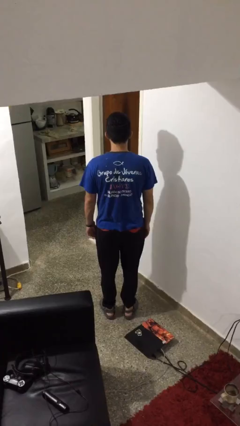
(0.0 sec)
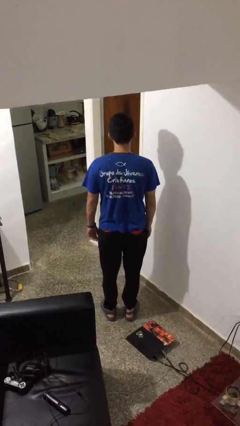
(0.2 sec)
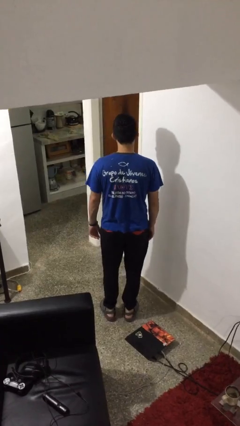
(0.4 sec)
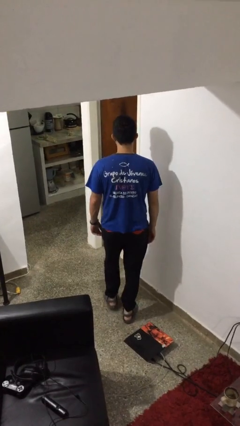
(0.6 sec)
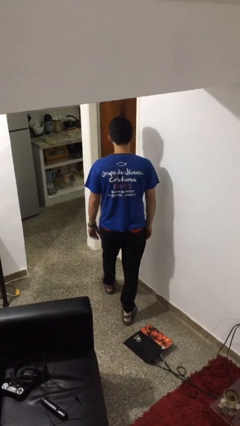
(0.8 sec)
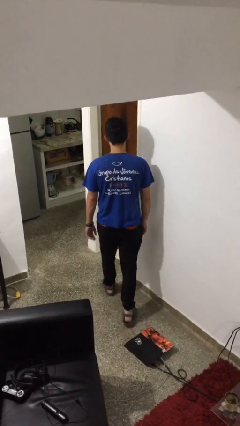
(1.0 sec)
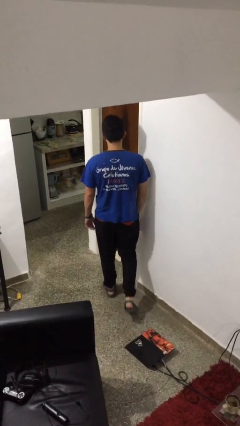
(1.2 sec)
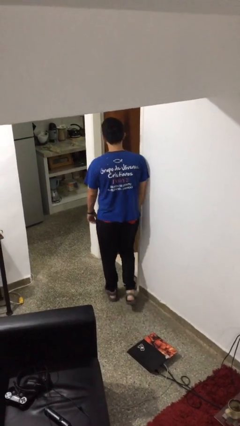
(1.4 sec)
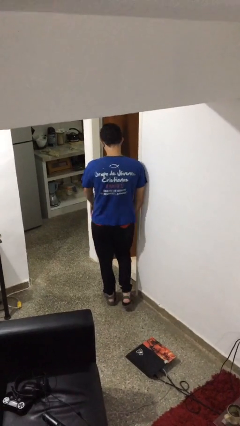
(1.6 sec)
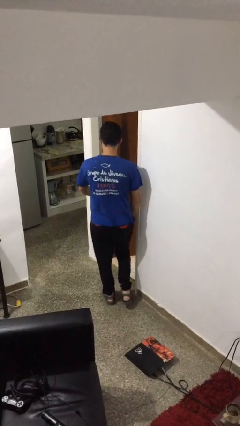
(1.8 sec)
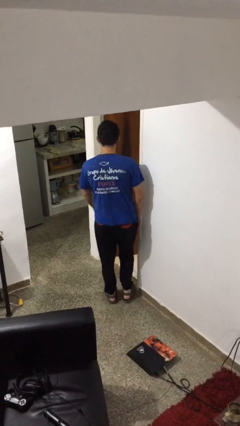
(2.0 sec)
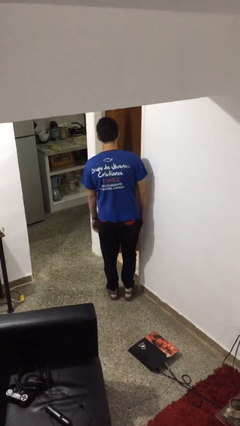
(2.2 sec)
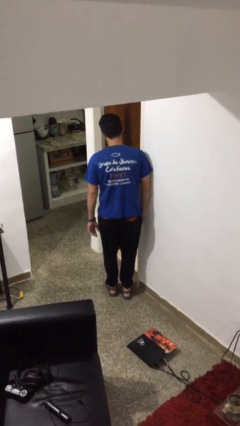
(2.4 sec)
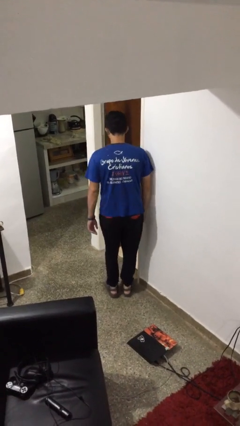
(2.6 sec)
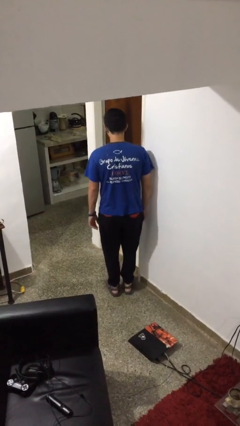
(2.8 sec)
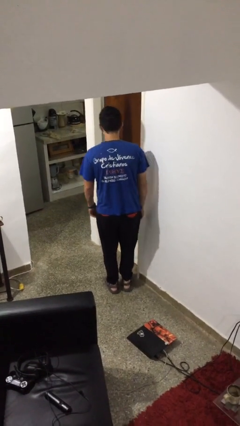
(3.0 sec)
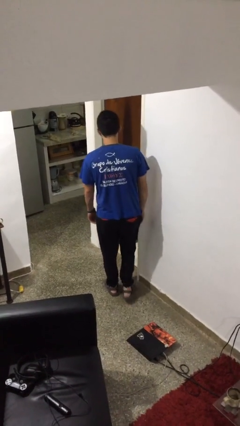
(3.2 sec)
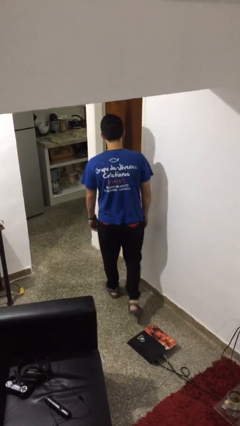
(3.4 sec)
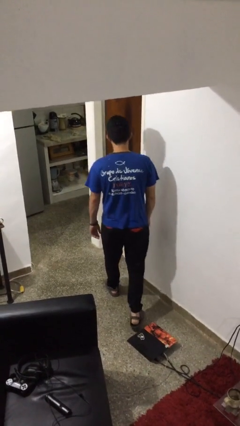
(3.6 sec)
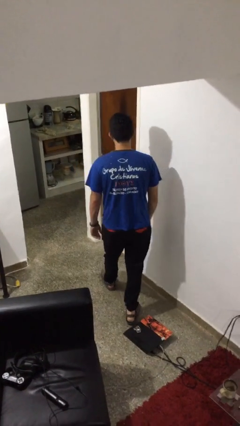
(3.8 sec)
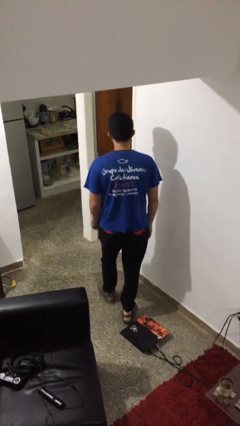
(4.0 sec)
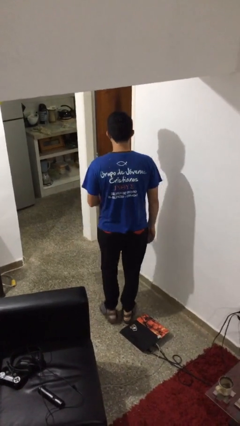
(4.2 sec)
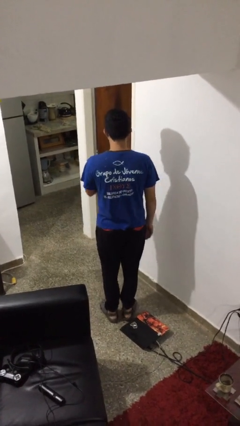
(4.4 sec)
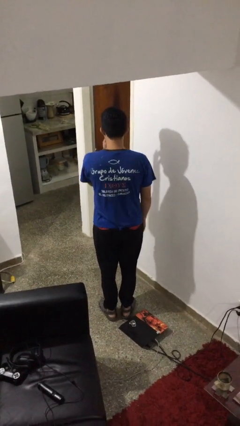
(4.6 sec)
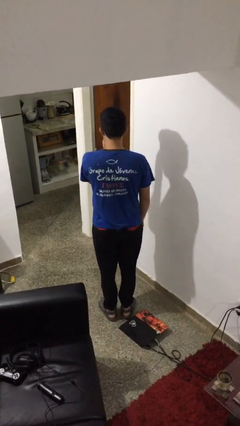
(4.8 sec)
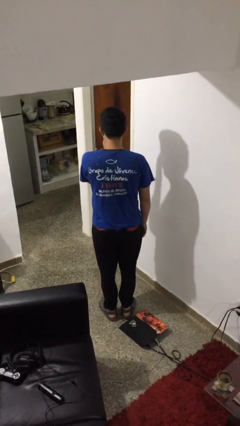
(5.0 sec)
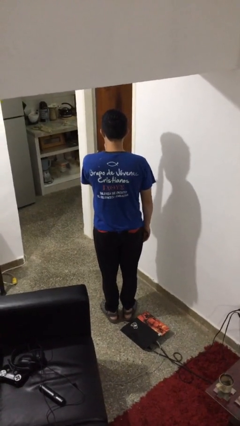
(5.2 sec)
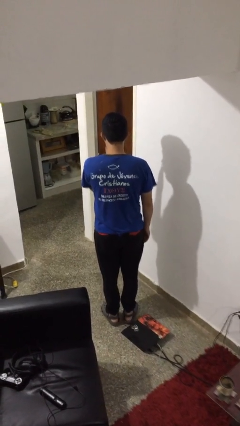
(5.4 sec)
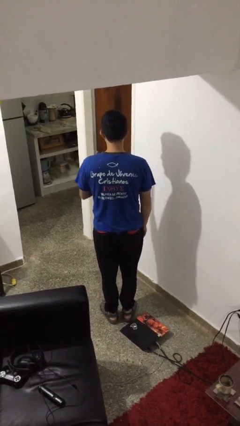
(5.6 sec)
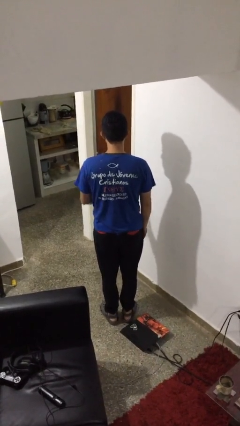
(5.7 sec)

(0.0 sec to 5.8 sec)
person bumps into wall

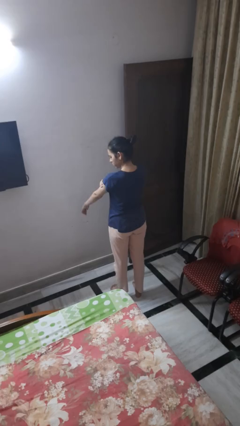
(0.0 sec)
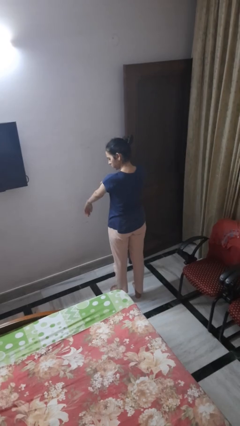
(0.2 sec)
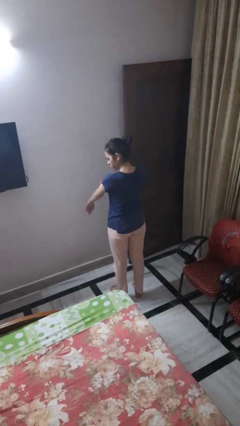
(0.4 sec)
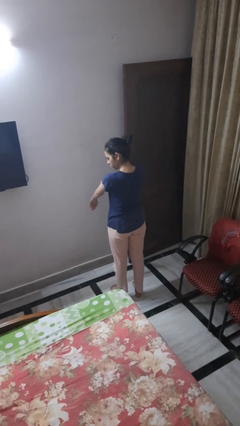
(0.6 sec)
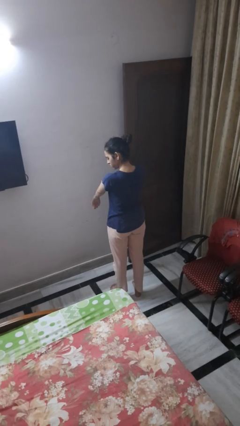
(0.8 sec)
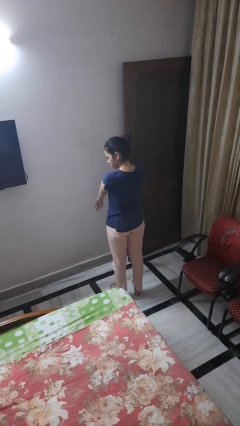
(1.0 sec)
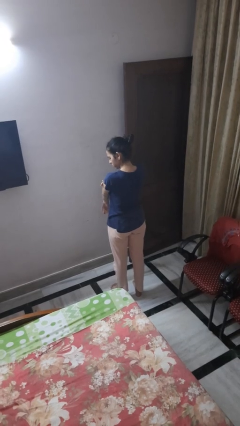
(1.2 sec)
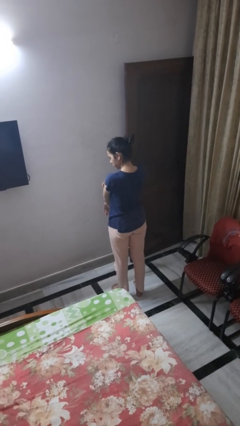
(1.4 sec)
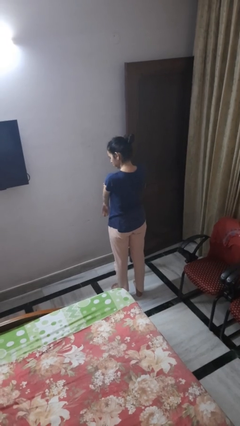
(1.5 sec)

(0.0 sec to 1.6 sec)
person swats bug

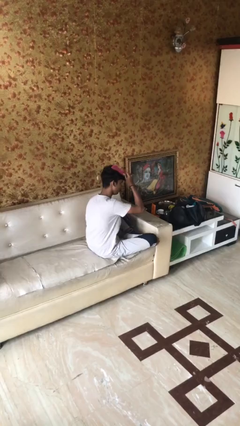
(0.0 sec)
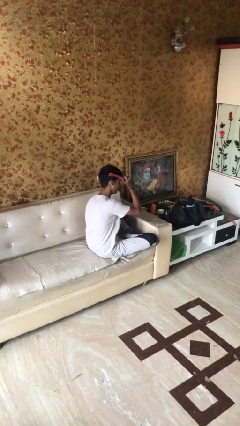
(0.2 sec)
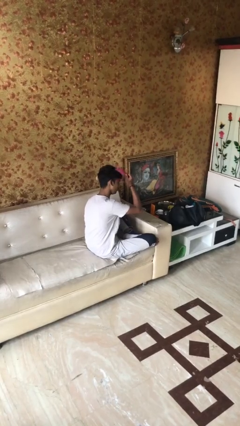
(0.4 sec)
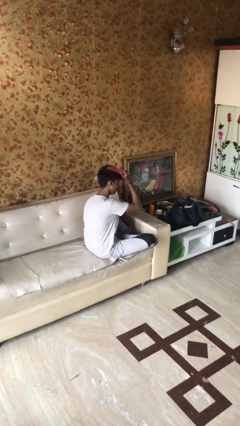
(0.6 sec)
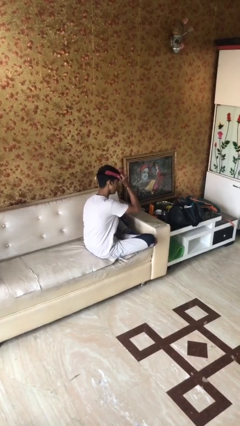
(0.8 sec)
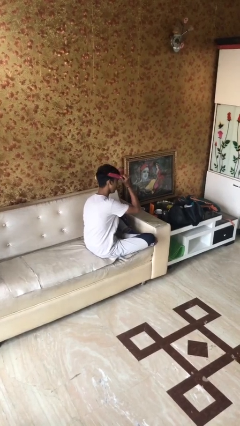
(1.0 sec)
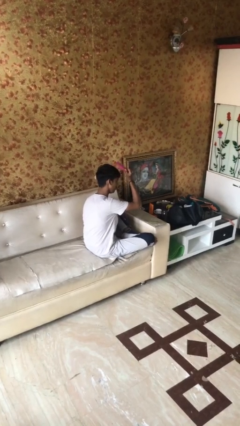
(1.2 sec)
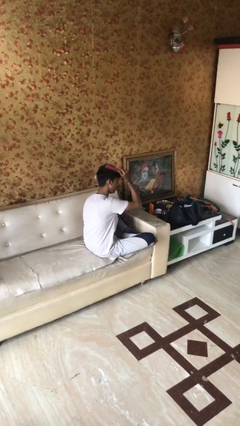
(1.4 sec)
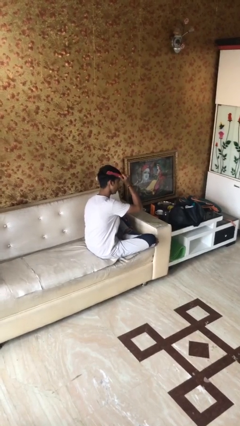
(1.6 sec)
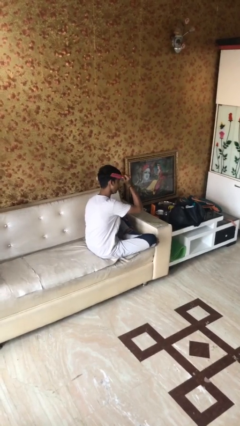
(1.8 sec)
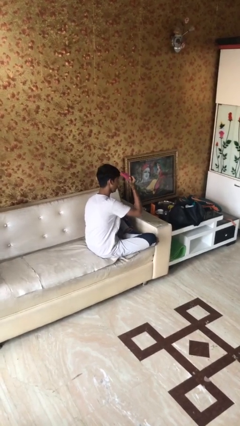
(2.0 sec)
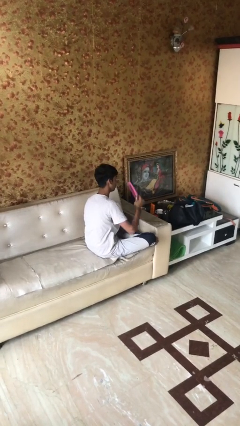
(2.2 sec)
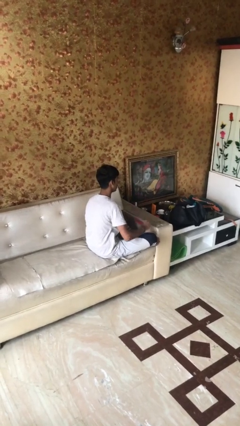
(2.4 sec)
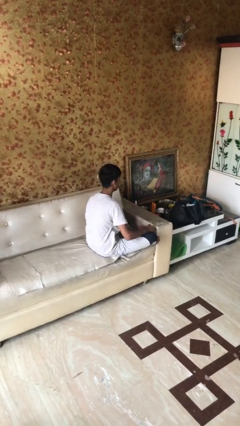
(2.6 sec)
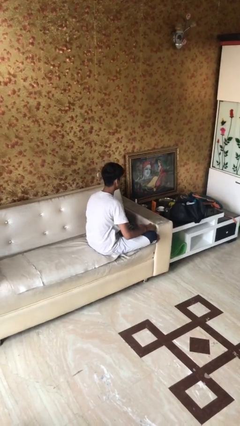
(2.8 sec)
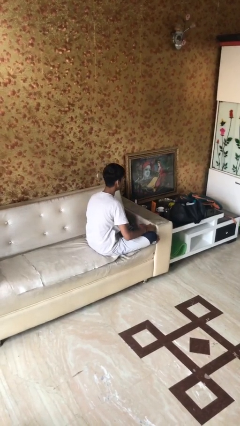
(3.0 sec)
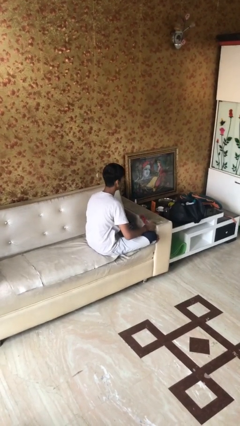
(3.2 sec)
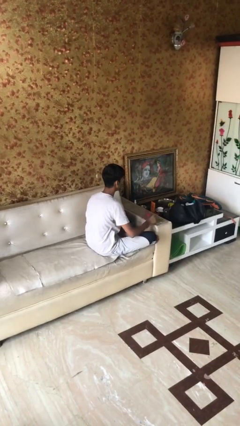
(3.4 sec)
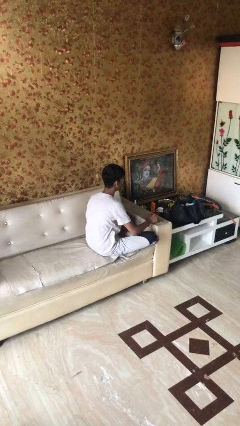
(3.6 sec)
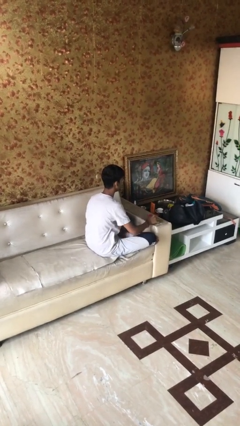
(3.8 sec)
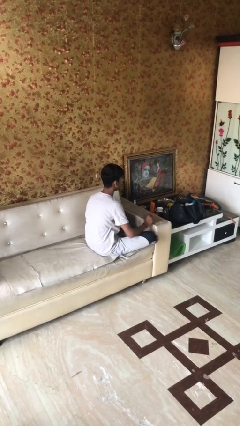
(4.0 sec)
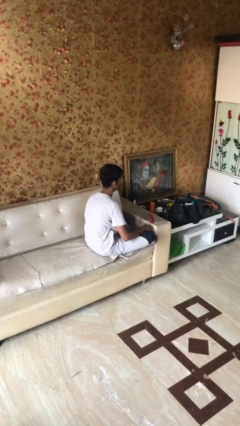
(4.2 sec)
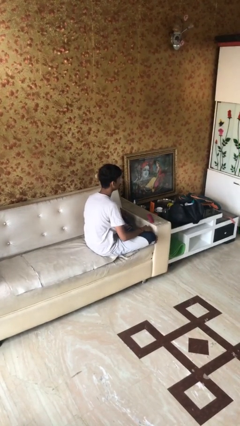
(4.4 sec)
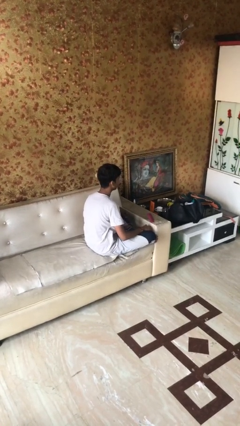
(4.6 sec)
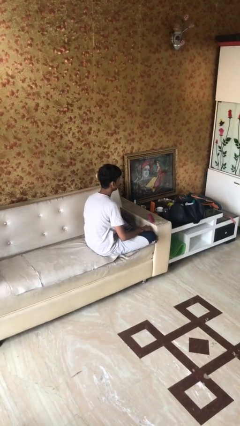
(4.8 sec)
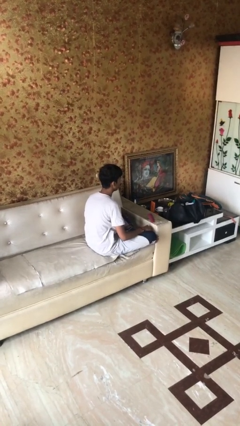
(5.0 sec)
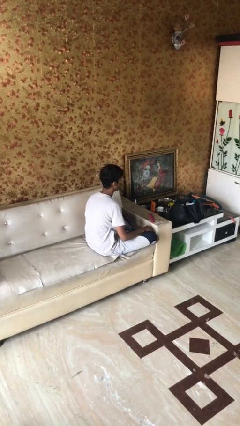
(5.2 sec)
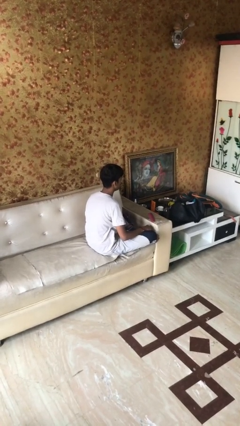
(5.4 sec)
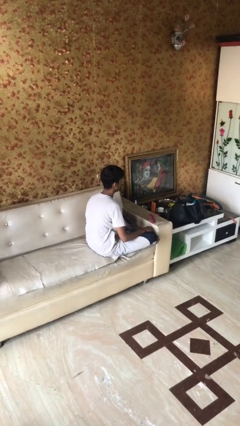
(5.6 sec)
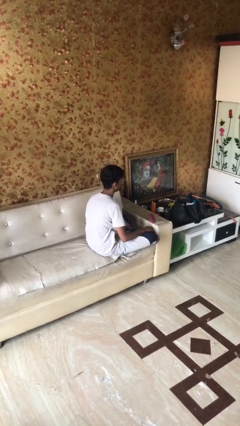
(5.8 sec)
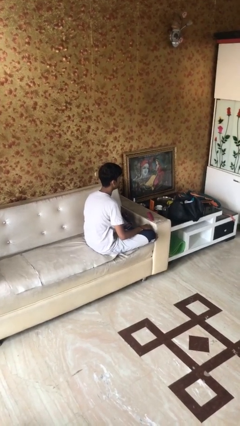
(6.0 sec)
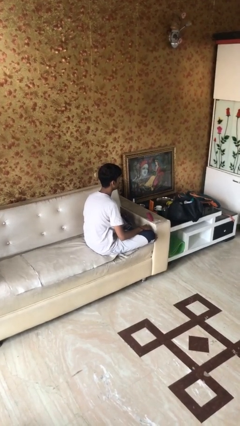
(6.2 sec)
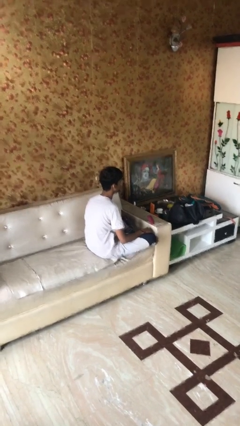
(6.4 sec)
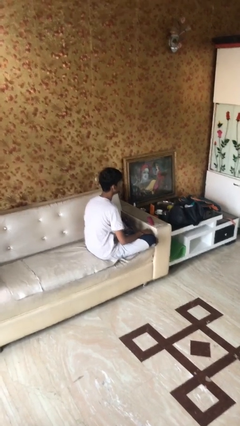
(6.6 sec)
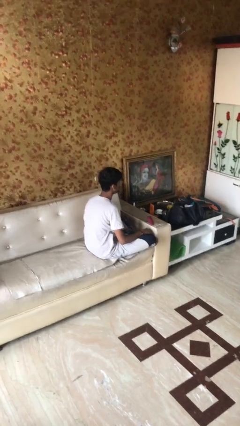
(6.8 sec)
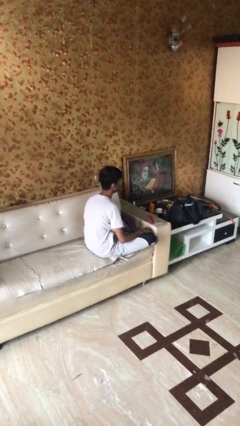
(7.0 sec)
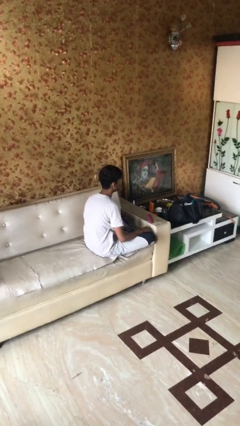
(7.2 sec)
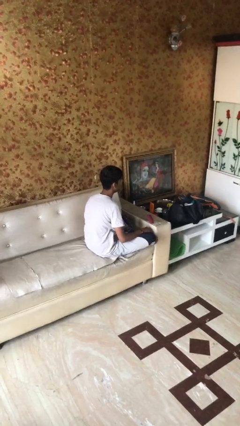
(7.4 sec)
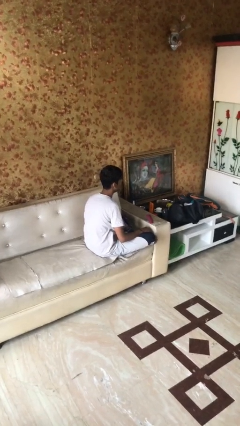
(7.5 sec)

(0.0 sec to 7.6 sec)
person brushes hair

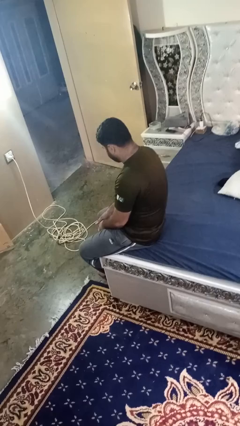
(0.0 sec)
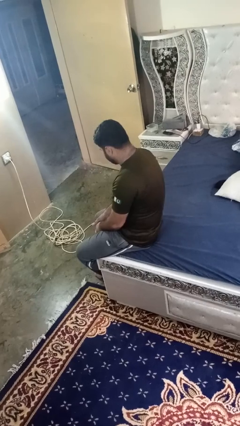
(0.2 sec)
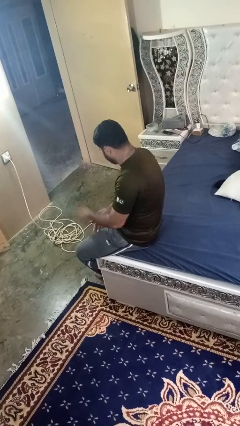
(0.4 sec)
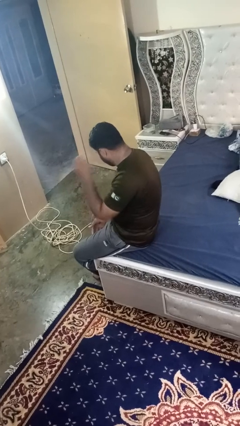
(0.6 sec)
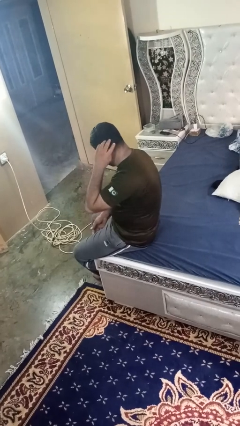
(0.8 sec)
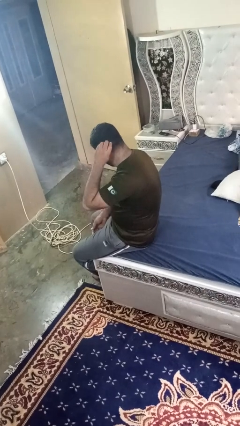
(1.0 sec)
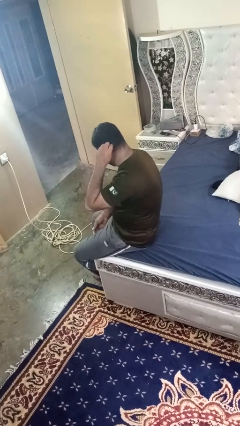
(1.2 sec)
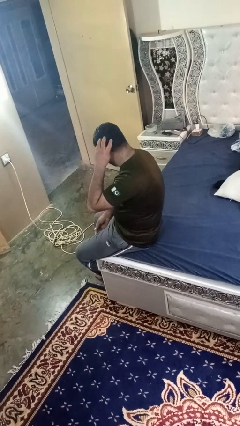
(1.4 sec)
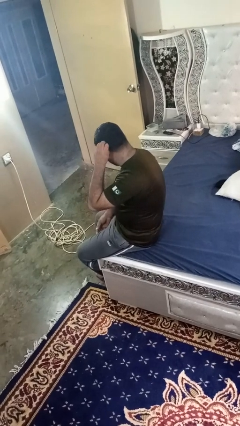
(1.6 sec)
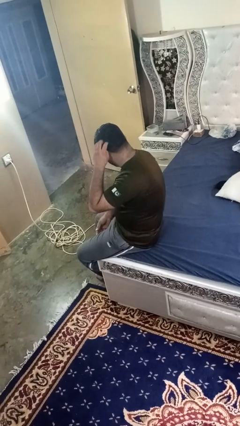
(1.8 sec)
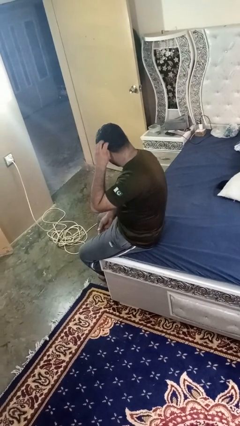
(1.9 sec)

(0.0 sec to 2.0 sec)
person strokes hair

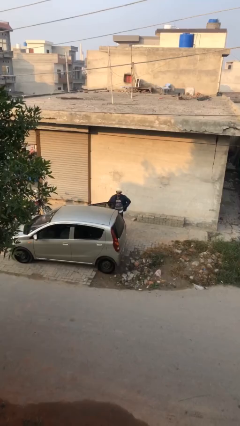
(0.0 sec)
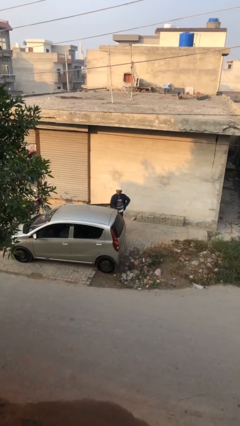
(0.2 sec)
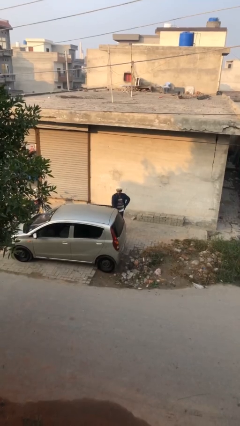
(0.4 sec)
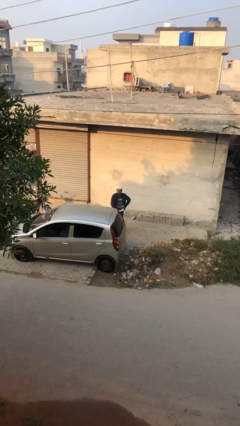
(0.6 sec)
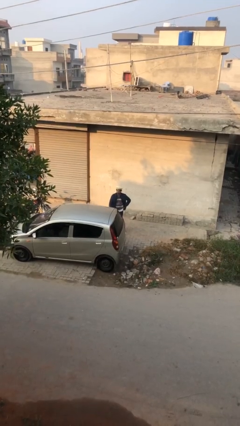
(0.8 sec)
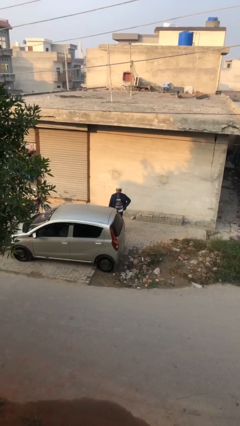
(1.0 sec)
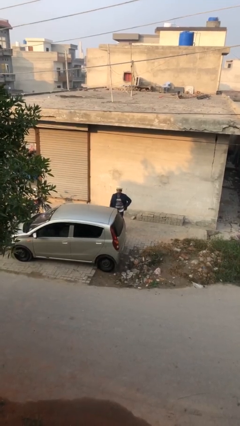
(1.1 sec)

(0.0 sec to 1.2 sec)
person closes car door
